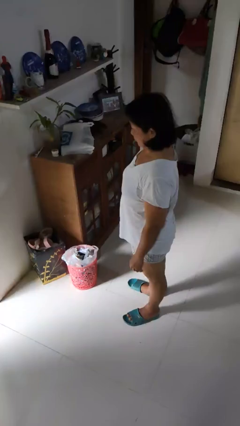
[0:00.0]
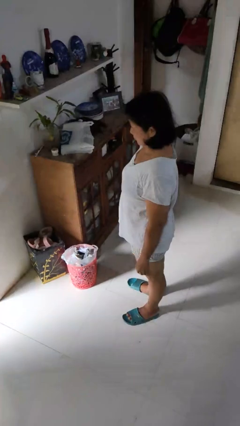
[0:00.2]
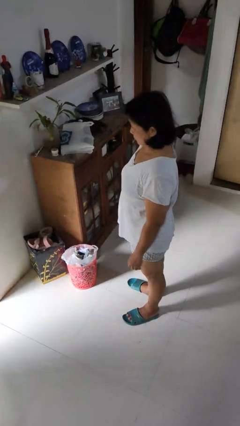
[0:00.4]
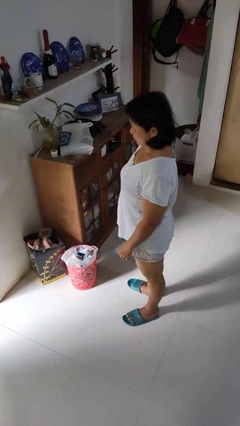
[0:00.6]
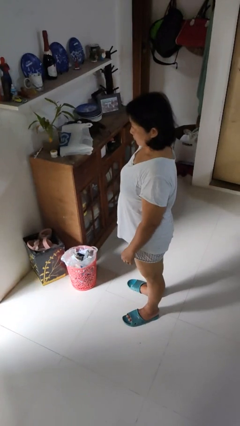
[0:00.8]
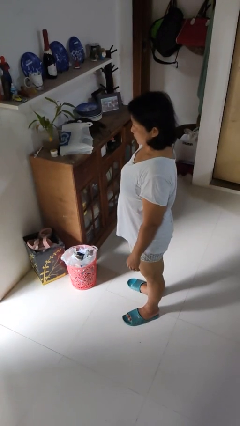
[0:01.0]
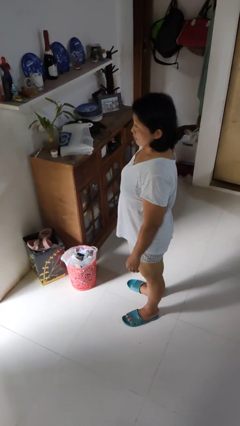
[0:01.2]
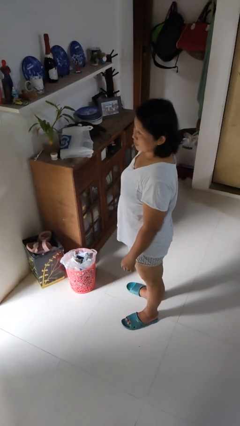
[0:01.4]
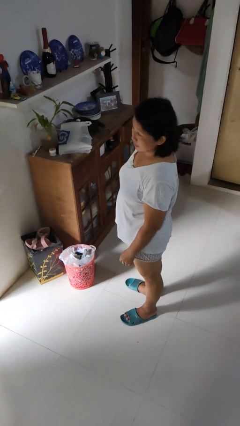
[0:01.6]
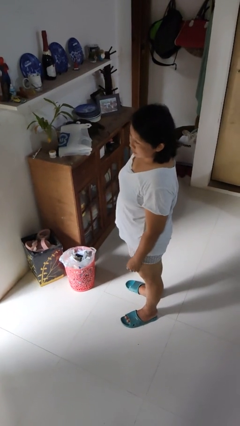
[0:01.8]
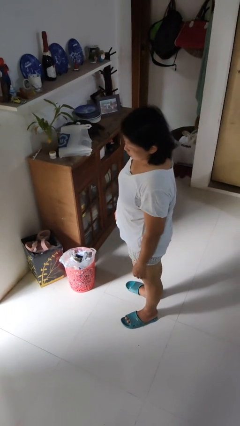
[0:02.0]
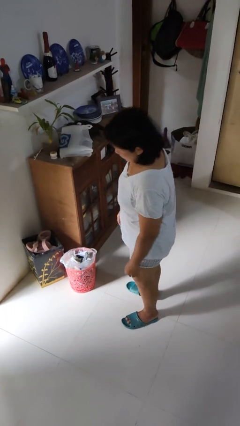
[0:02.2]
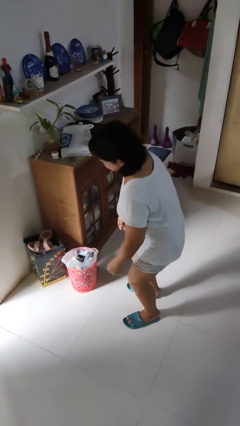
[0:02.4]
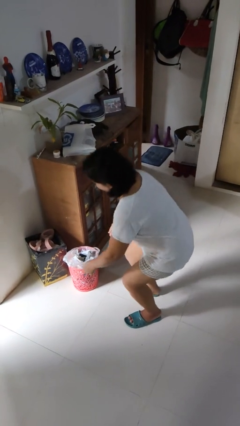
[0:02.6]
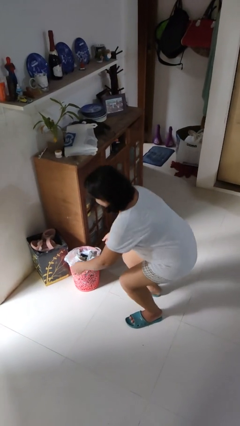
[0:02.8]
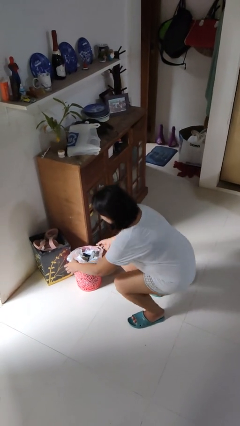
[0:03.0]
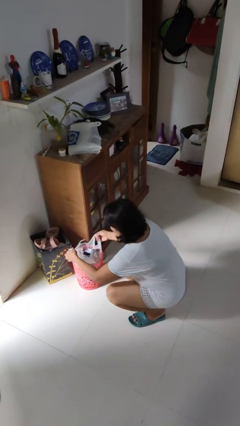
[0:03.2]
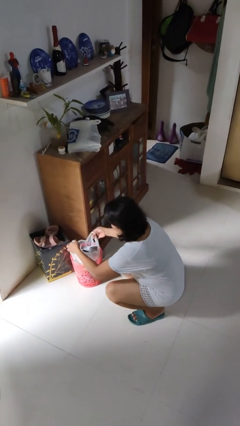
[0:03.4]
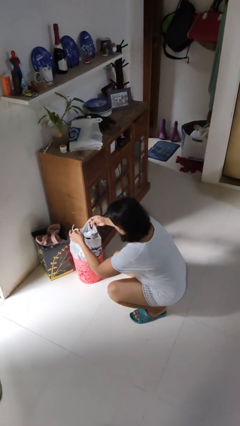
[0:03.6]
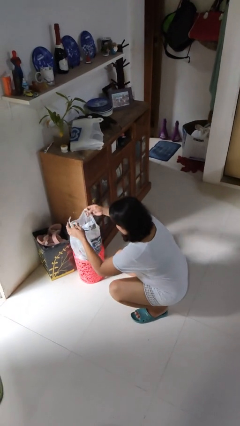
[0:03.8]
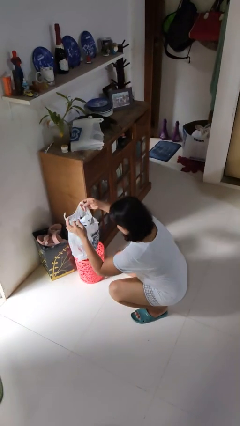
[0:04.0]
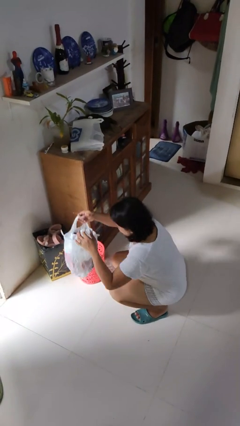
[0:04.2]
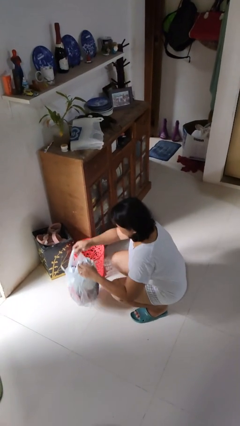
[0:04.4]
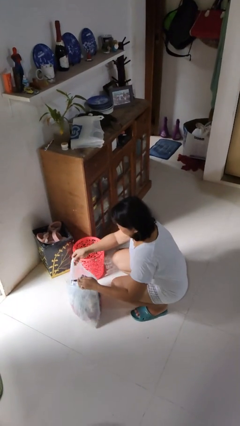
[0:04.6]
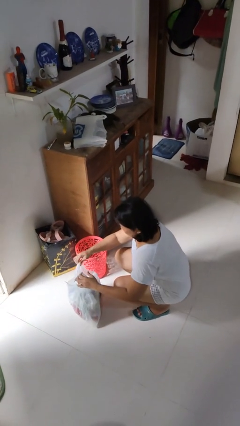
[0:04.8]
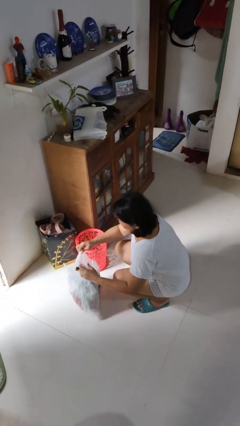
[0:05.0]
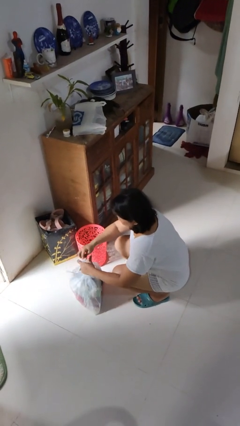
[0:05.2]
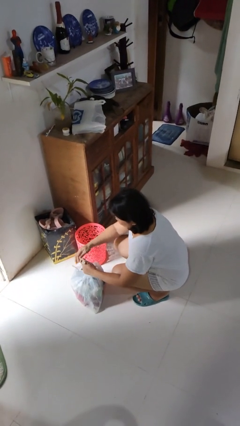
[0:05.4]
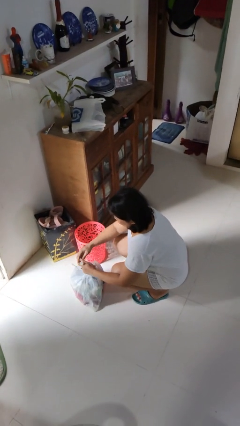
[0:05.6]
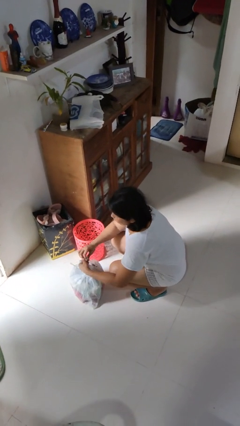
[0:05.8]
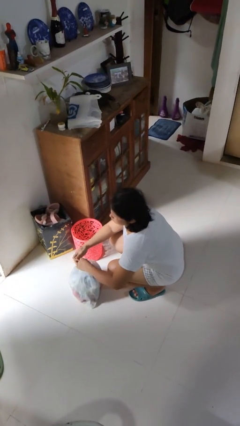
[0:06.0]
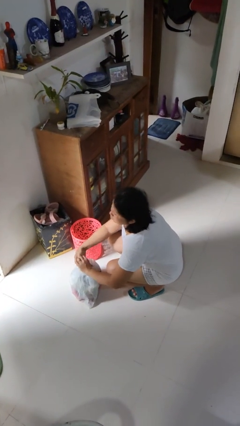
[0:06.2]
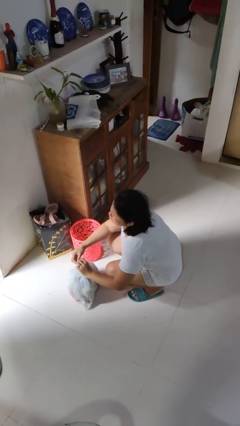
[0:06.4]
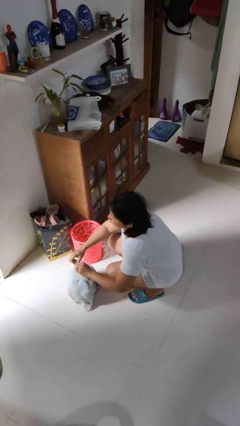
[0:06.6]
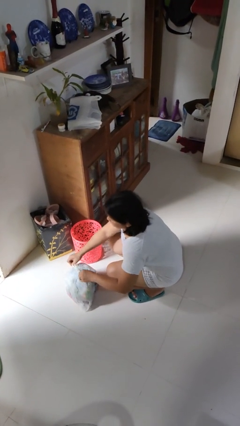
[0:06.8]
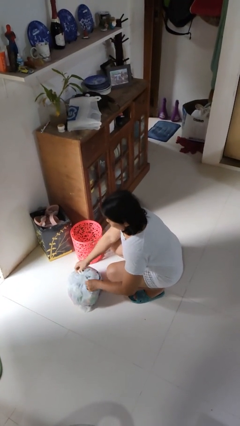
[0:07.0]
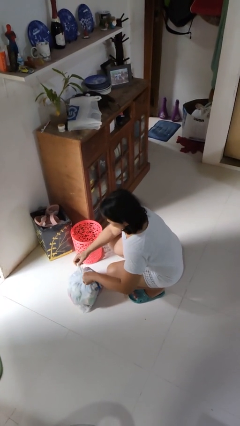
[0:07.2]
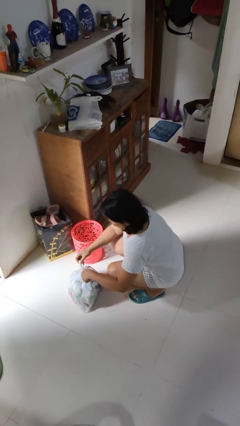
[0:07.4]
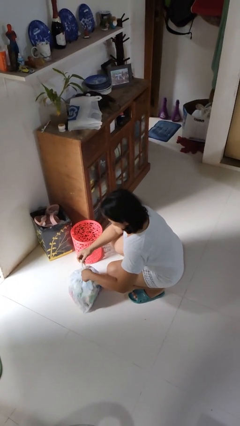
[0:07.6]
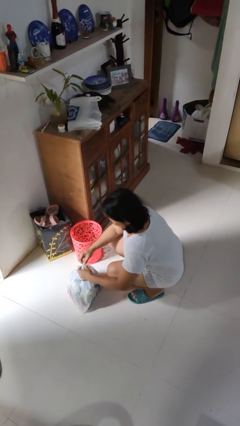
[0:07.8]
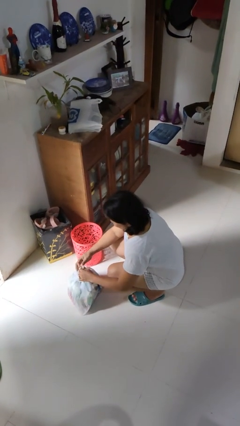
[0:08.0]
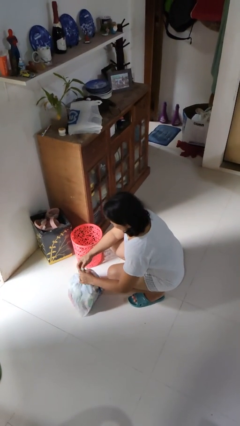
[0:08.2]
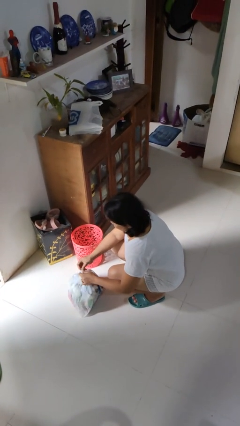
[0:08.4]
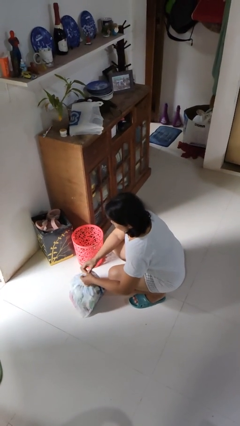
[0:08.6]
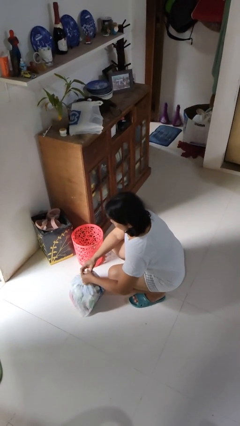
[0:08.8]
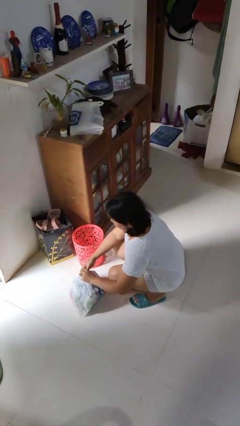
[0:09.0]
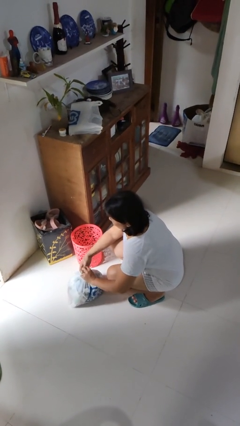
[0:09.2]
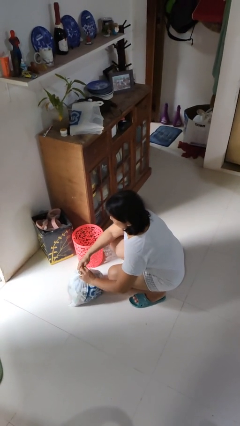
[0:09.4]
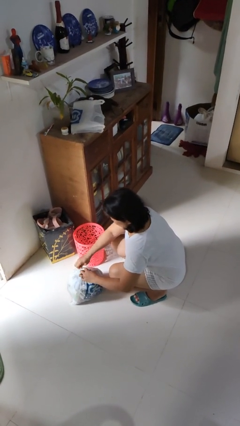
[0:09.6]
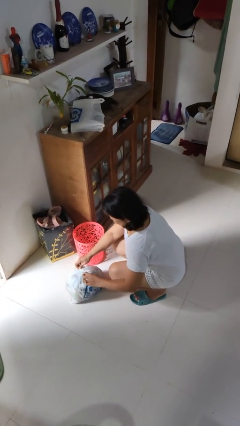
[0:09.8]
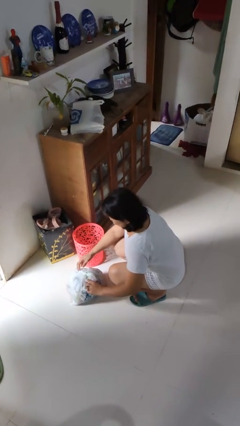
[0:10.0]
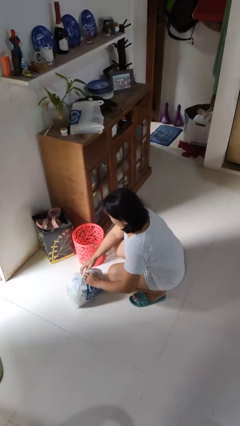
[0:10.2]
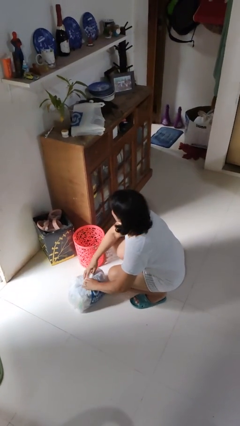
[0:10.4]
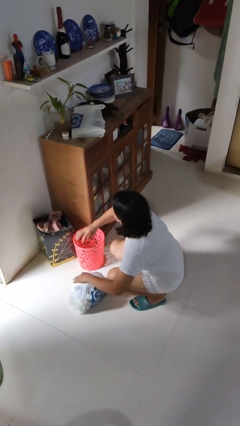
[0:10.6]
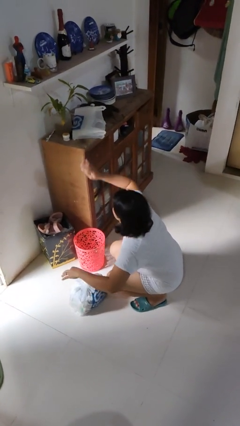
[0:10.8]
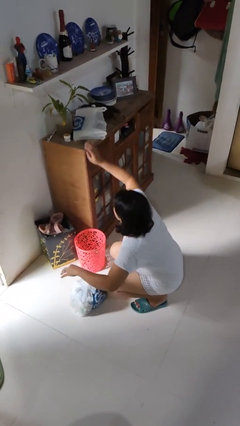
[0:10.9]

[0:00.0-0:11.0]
person removes trashbag from trashcan

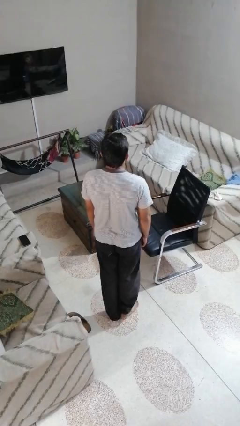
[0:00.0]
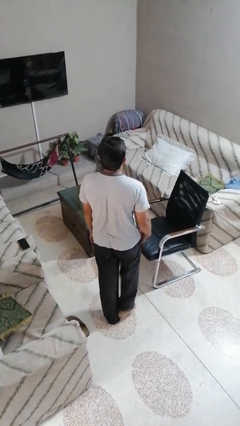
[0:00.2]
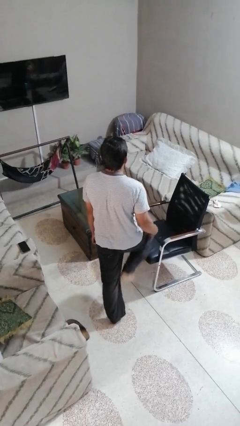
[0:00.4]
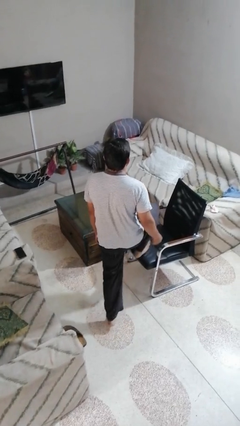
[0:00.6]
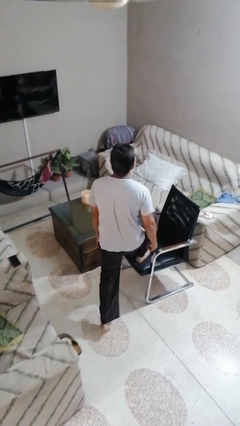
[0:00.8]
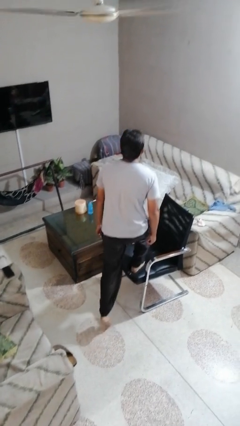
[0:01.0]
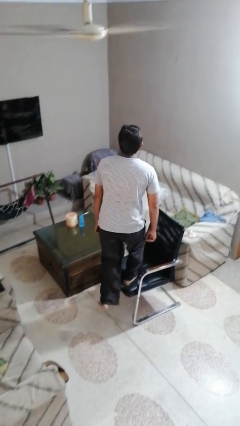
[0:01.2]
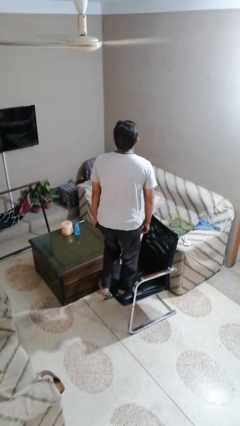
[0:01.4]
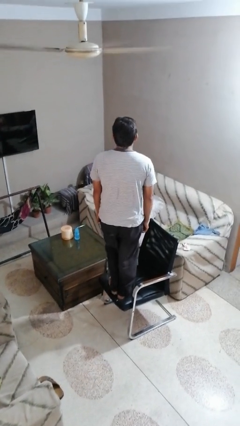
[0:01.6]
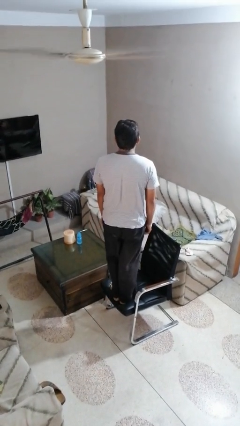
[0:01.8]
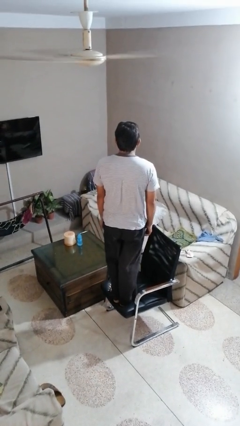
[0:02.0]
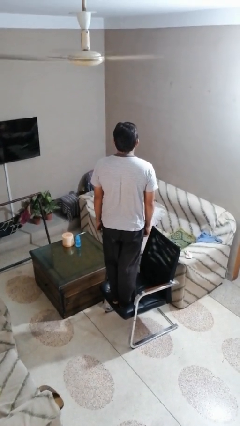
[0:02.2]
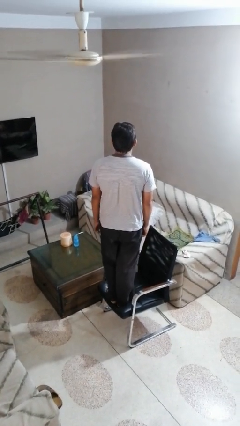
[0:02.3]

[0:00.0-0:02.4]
person climbs on chair

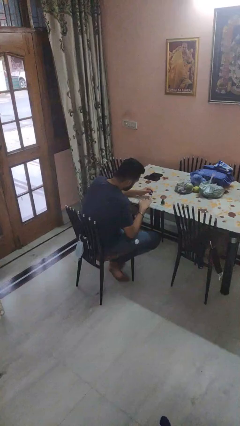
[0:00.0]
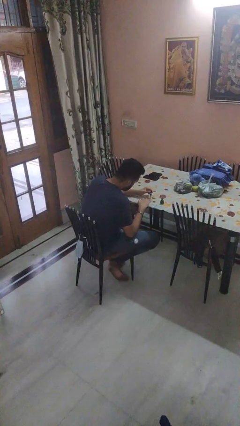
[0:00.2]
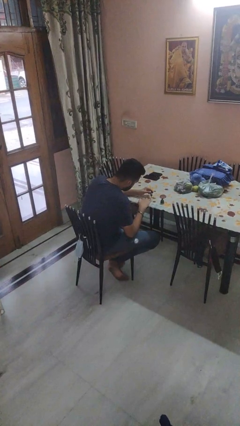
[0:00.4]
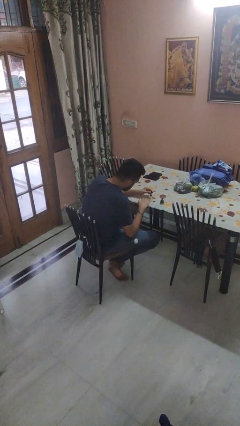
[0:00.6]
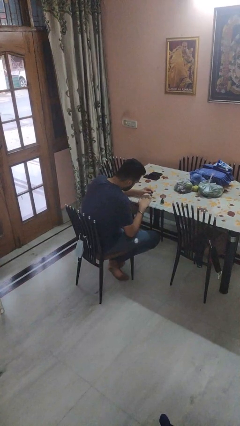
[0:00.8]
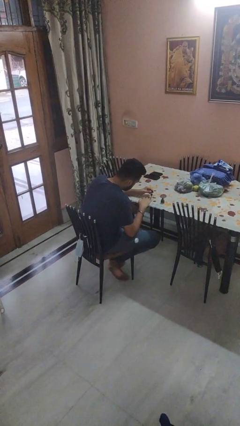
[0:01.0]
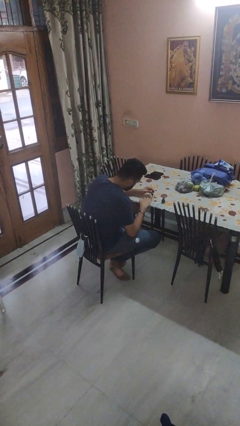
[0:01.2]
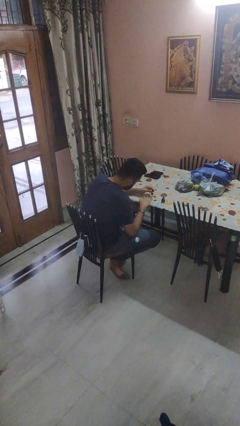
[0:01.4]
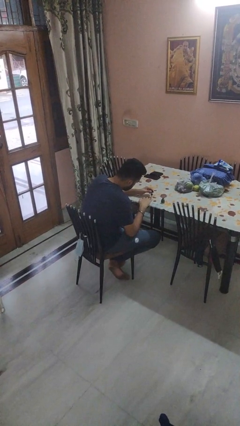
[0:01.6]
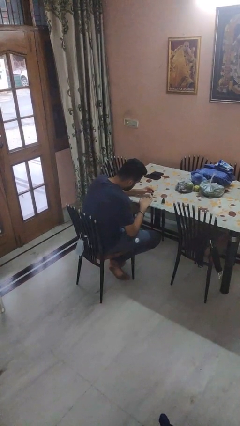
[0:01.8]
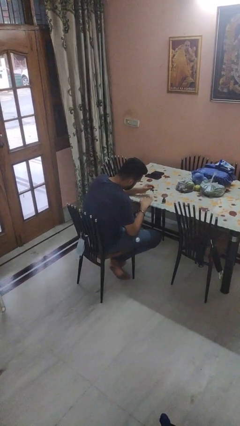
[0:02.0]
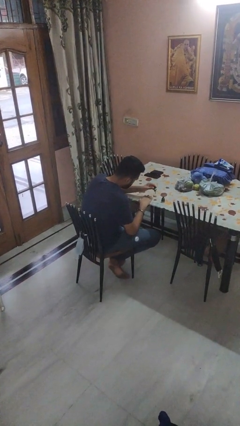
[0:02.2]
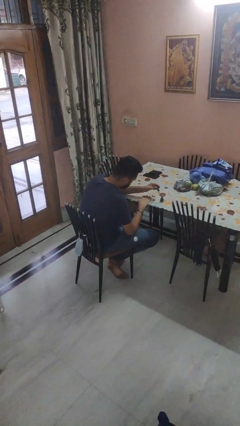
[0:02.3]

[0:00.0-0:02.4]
person paints fingernails

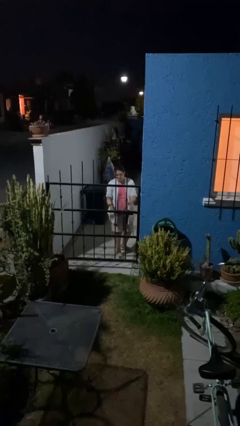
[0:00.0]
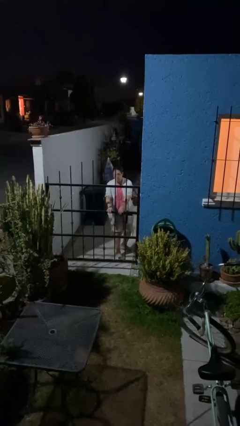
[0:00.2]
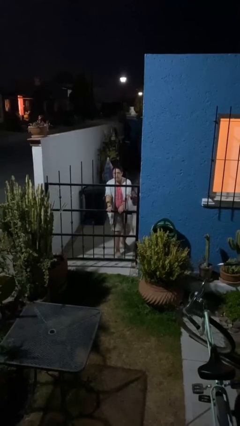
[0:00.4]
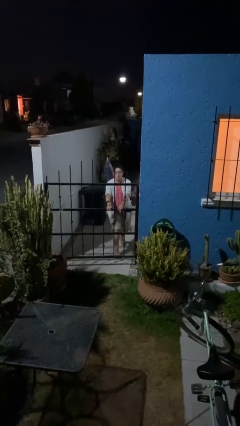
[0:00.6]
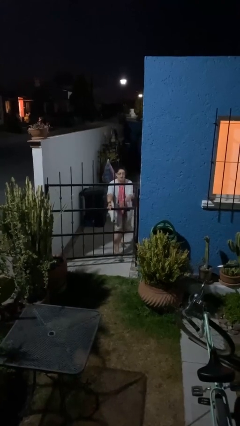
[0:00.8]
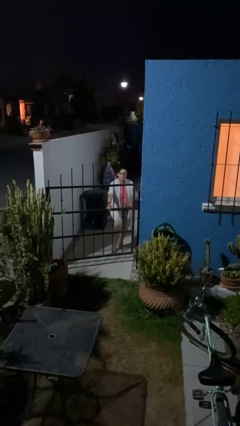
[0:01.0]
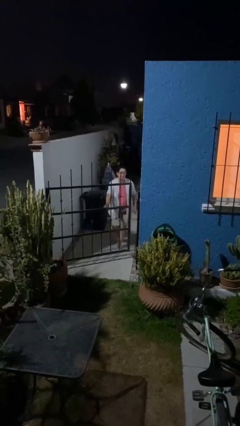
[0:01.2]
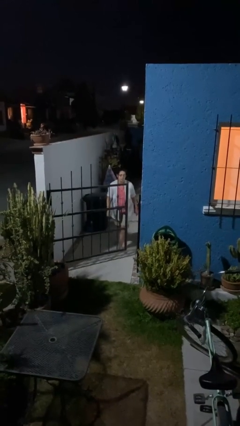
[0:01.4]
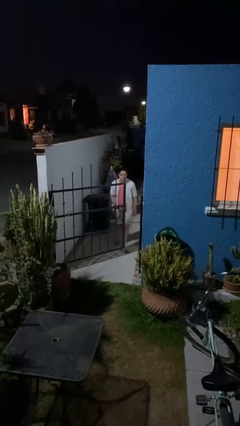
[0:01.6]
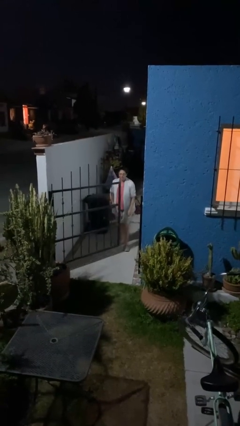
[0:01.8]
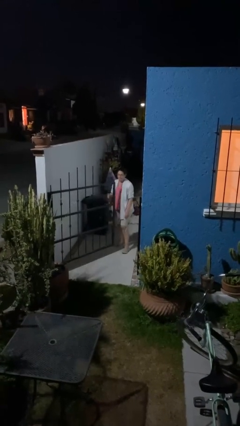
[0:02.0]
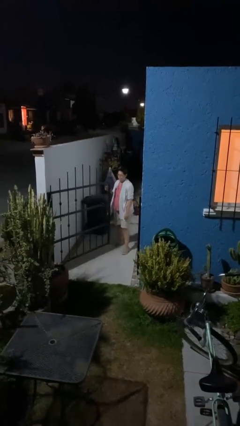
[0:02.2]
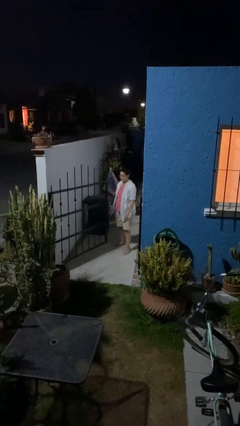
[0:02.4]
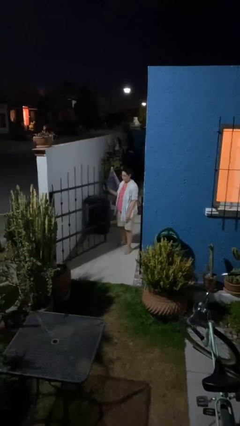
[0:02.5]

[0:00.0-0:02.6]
person opens facility door
